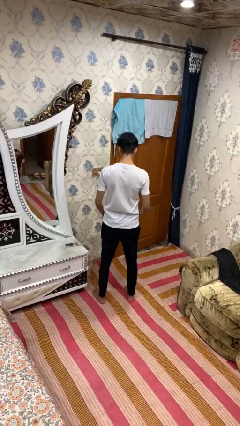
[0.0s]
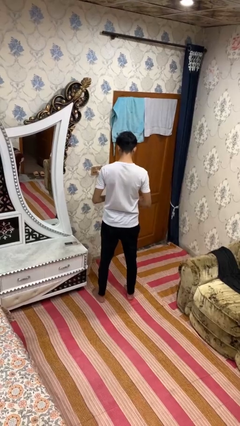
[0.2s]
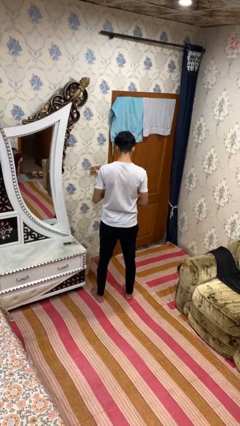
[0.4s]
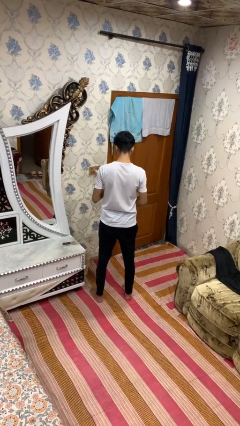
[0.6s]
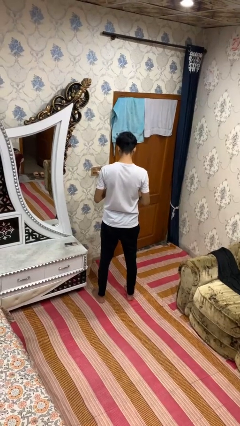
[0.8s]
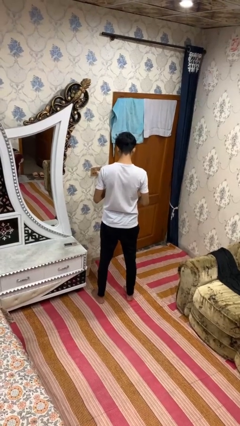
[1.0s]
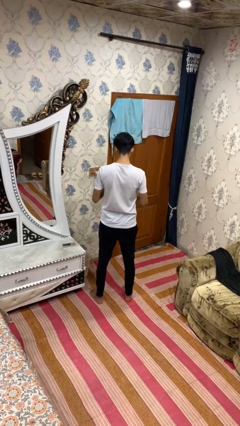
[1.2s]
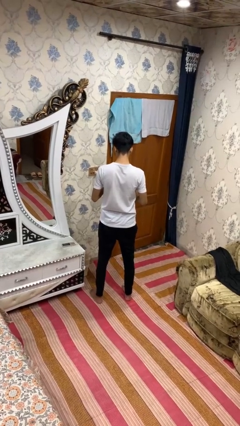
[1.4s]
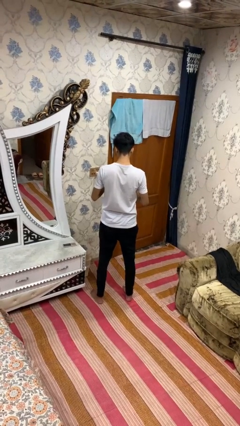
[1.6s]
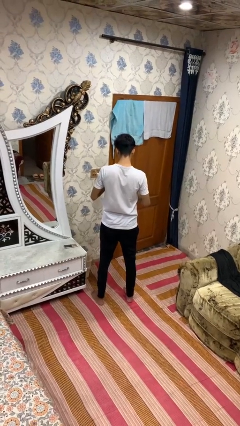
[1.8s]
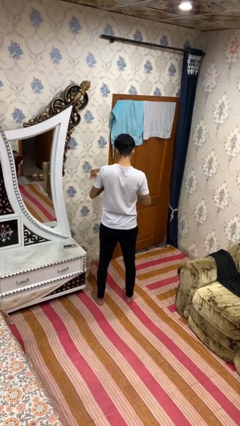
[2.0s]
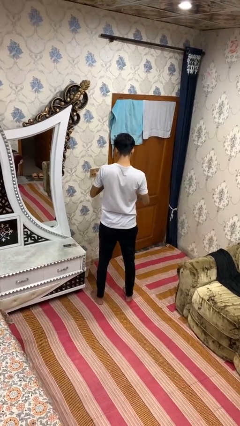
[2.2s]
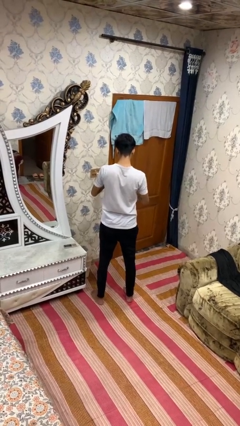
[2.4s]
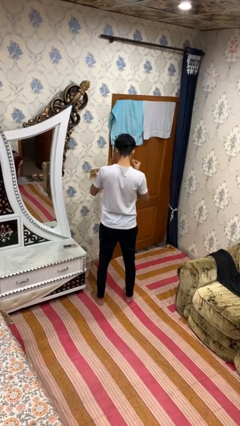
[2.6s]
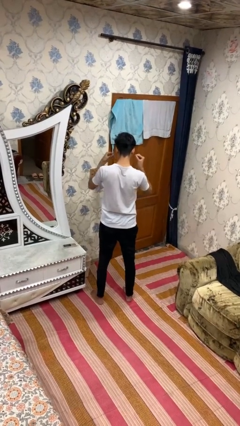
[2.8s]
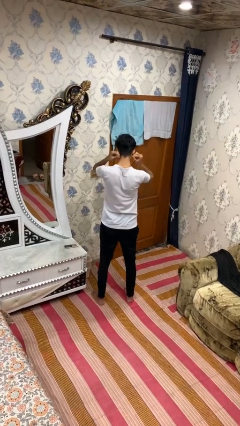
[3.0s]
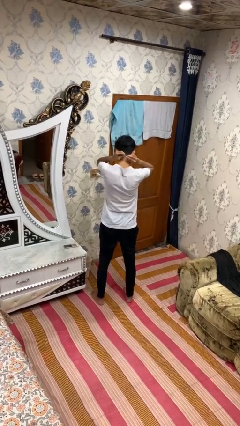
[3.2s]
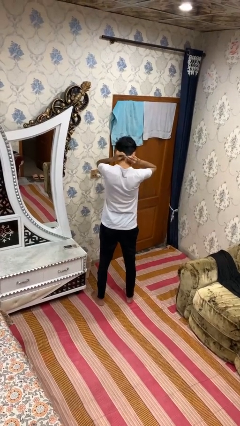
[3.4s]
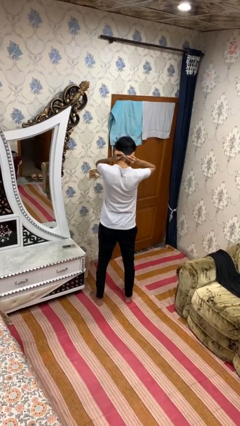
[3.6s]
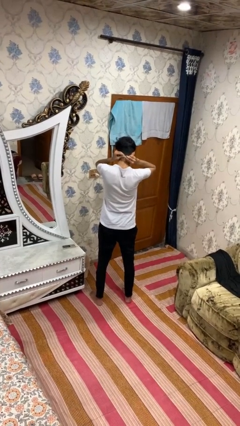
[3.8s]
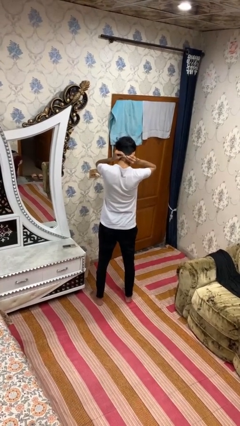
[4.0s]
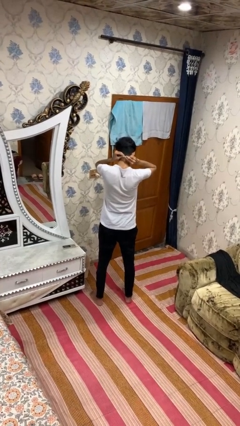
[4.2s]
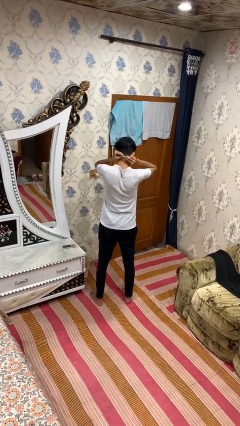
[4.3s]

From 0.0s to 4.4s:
person puts on necklace

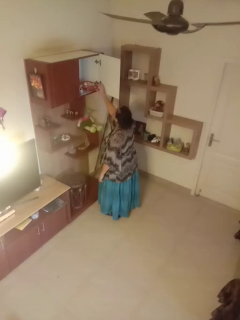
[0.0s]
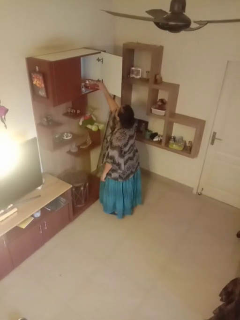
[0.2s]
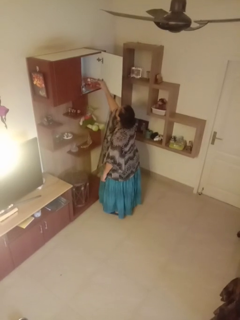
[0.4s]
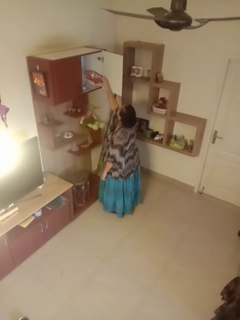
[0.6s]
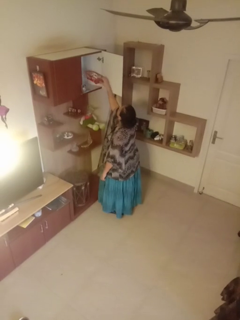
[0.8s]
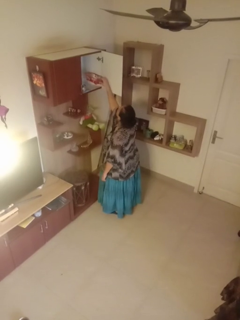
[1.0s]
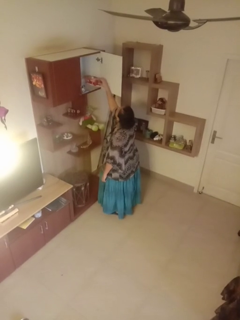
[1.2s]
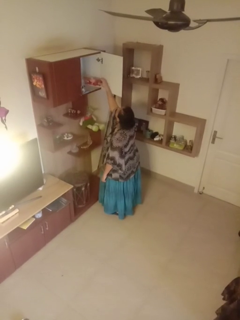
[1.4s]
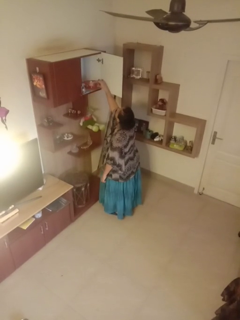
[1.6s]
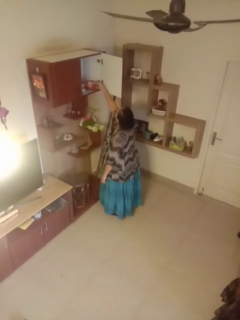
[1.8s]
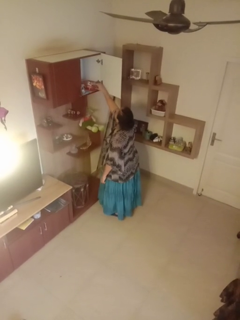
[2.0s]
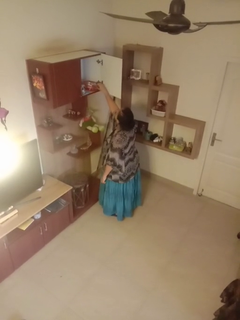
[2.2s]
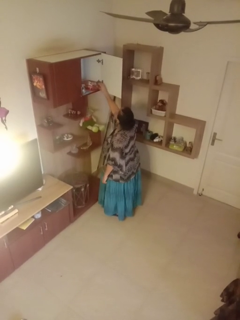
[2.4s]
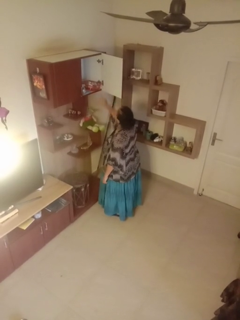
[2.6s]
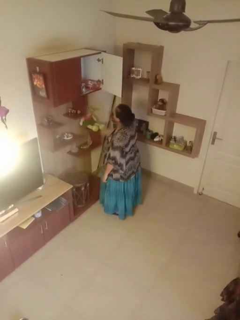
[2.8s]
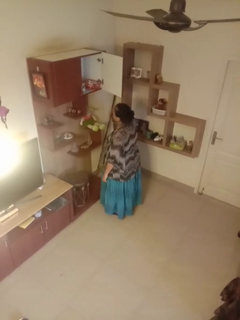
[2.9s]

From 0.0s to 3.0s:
person searches in cabinet

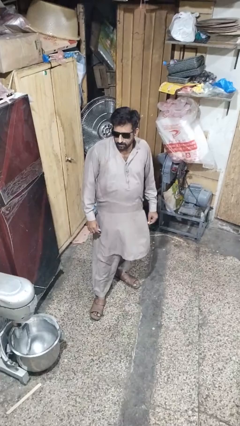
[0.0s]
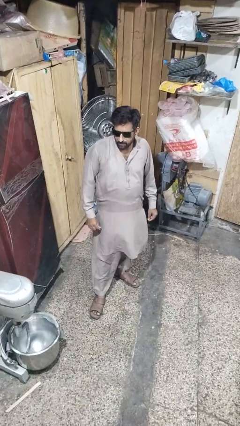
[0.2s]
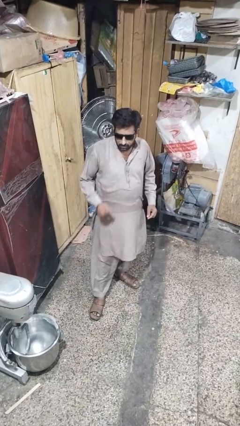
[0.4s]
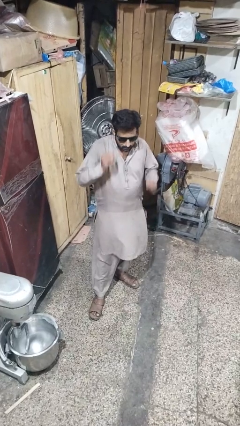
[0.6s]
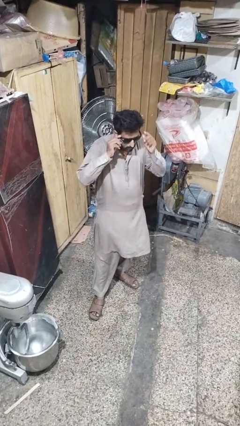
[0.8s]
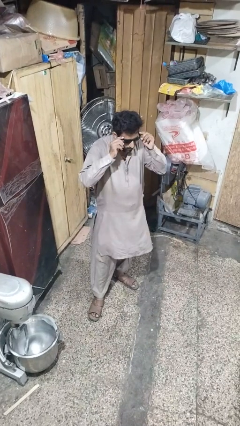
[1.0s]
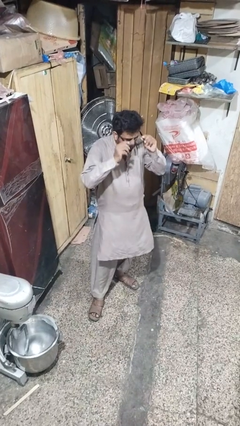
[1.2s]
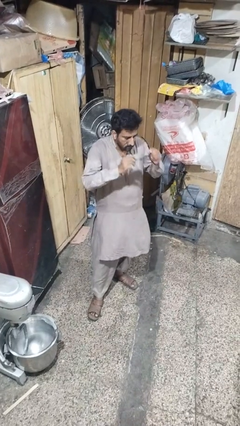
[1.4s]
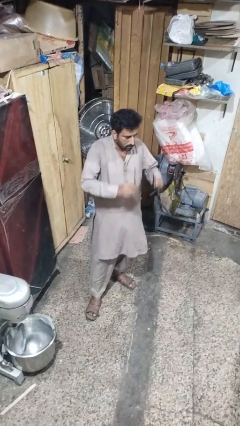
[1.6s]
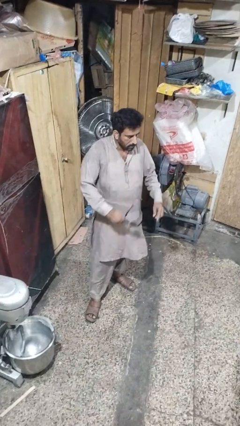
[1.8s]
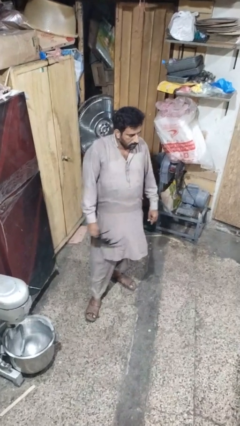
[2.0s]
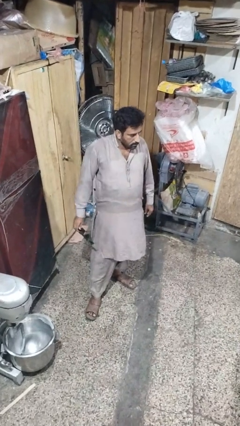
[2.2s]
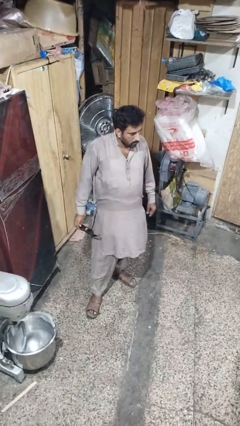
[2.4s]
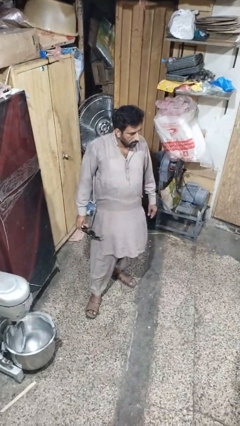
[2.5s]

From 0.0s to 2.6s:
person takes off sunglasses

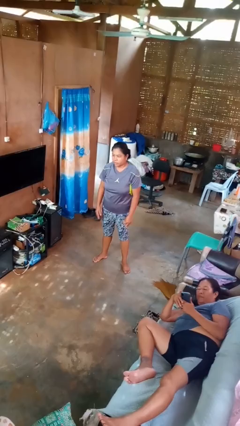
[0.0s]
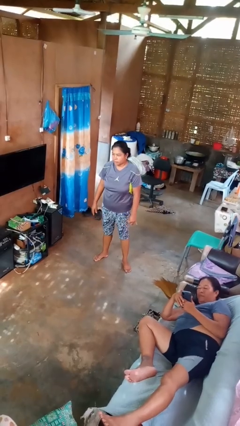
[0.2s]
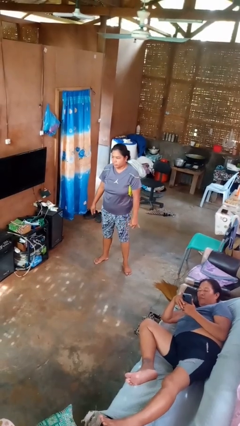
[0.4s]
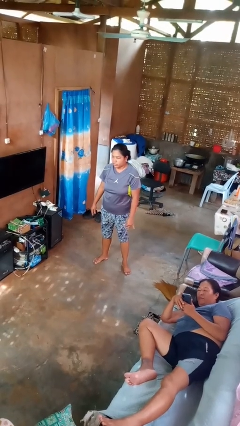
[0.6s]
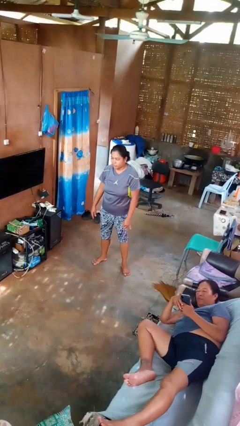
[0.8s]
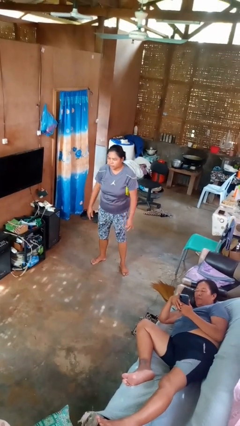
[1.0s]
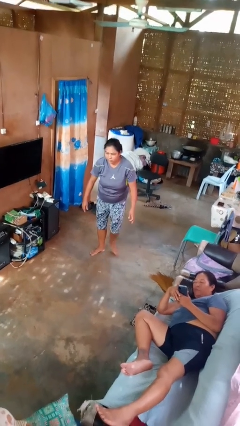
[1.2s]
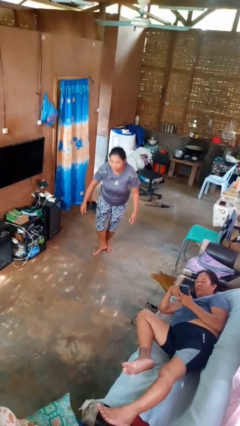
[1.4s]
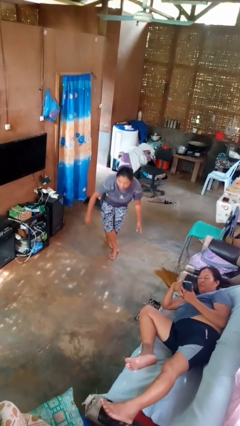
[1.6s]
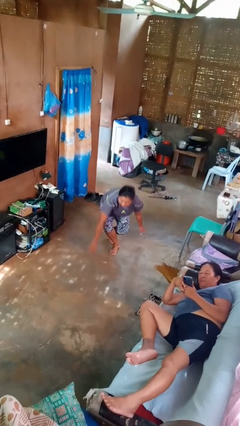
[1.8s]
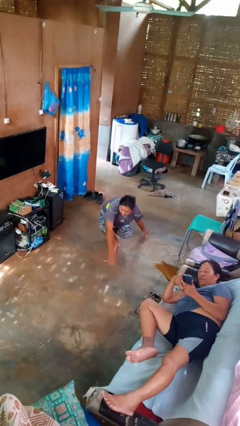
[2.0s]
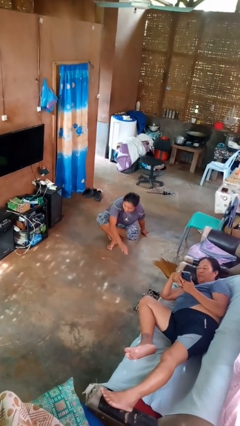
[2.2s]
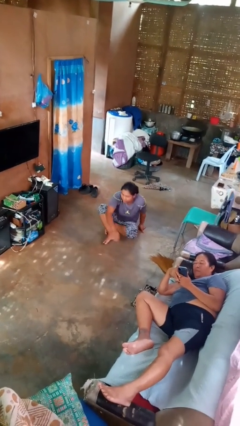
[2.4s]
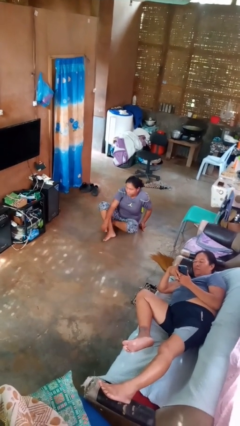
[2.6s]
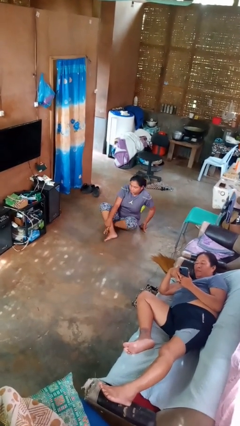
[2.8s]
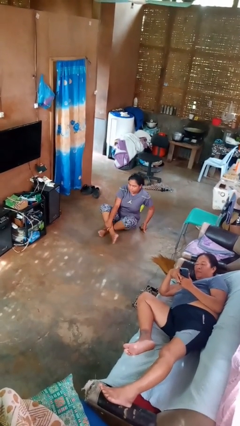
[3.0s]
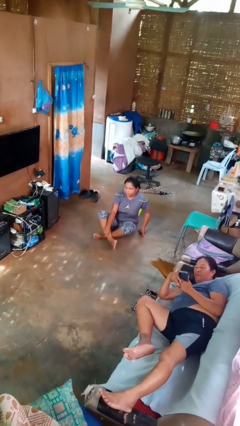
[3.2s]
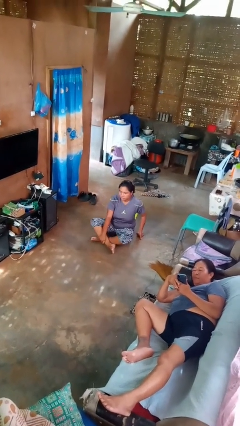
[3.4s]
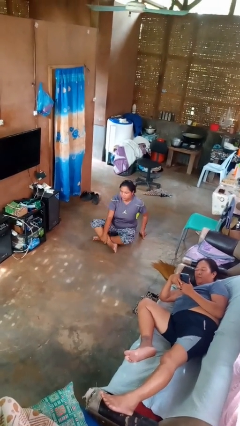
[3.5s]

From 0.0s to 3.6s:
person sits crisscross

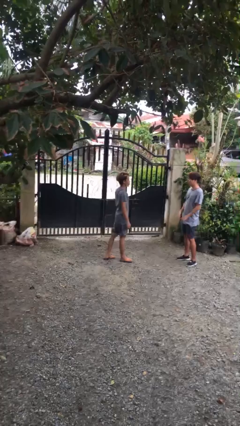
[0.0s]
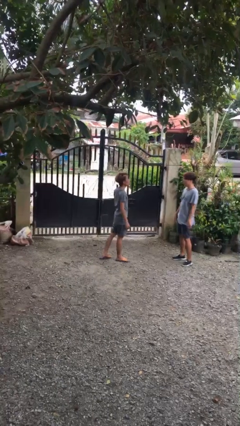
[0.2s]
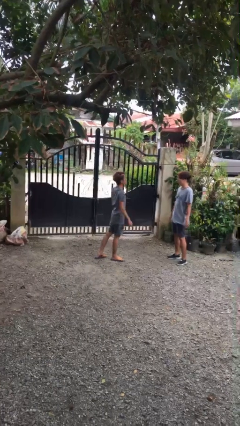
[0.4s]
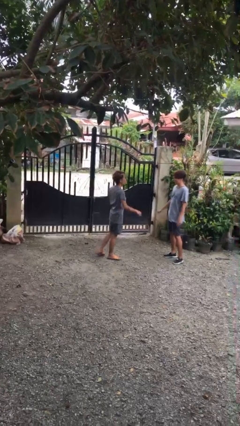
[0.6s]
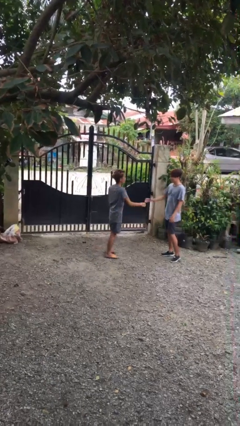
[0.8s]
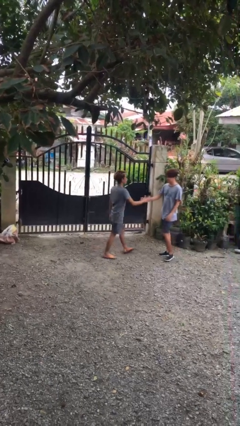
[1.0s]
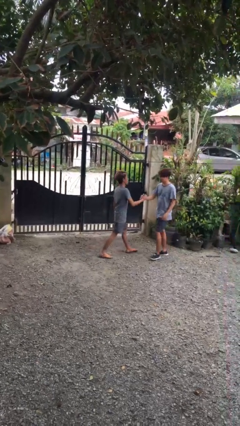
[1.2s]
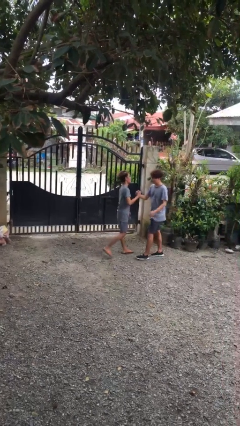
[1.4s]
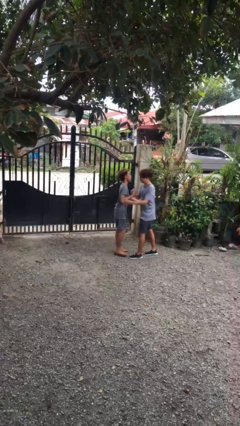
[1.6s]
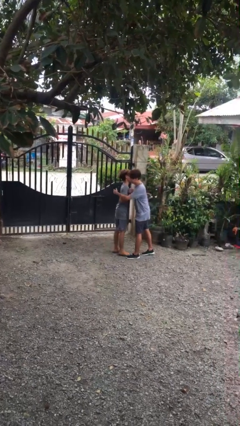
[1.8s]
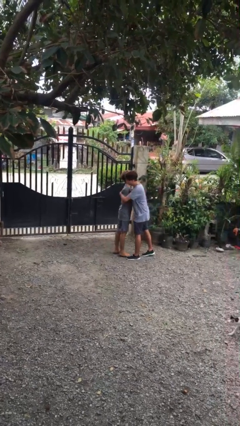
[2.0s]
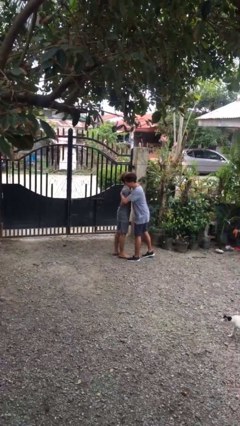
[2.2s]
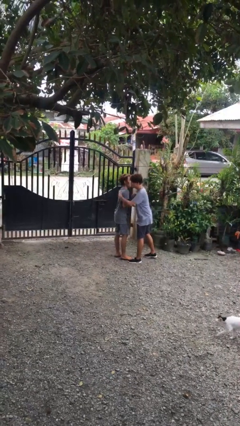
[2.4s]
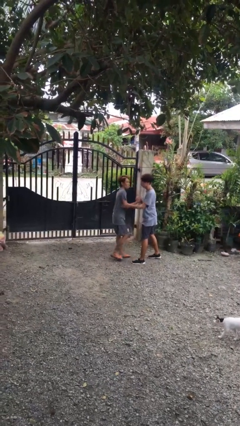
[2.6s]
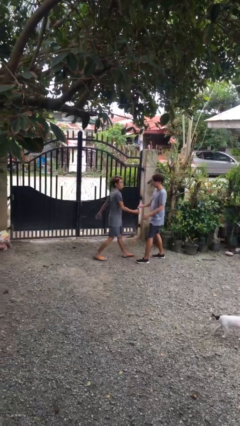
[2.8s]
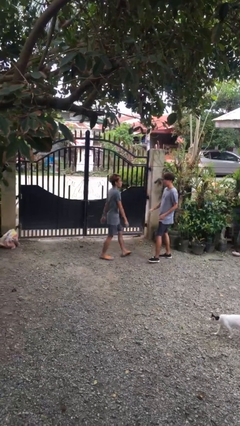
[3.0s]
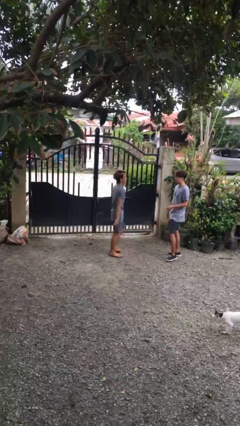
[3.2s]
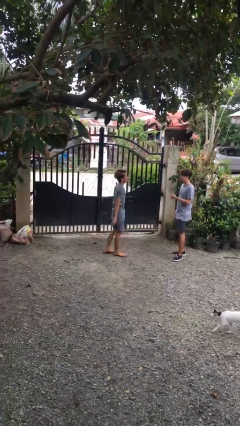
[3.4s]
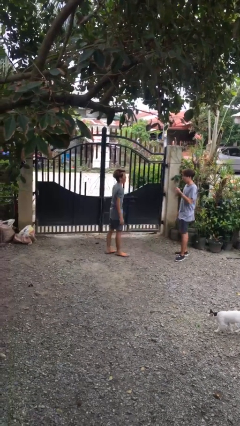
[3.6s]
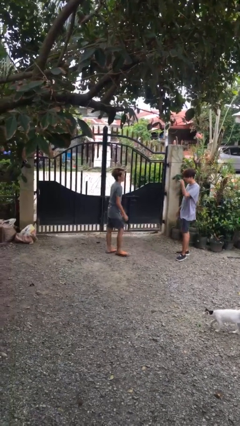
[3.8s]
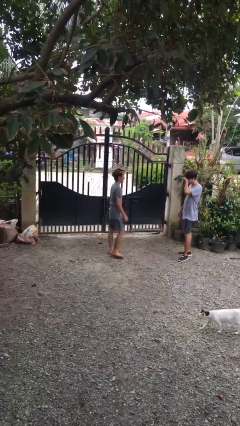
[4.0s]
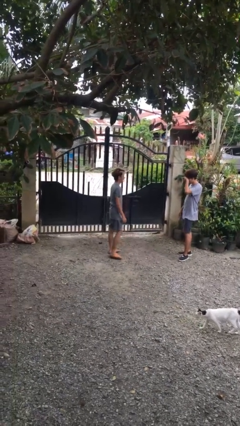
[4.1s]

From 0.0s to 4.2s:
person embraces person

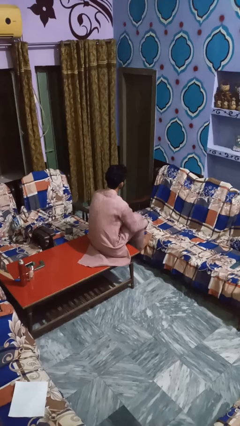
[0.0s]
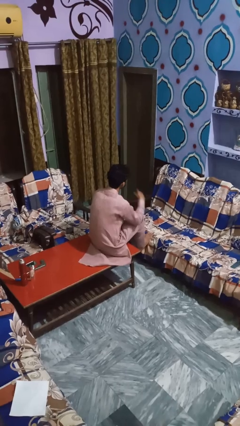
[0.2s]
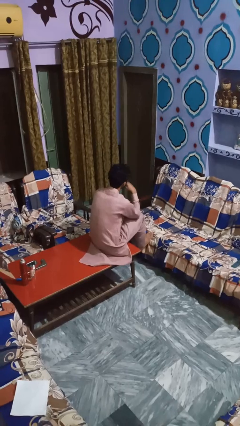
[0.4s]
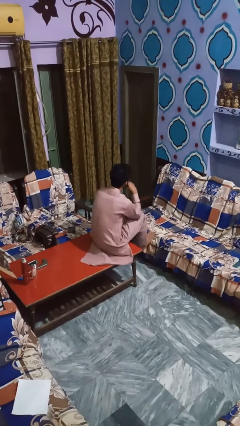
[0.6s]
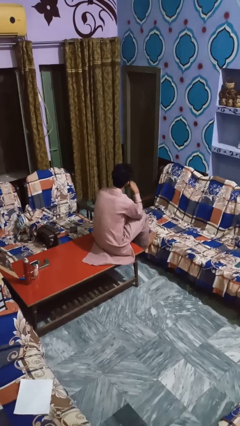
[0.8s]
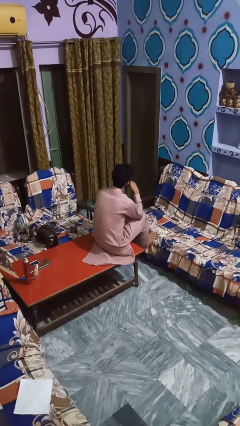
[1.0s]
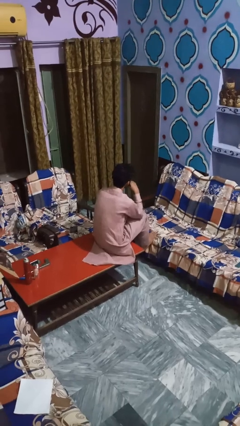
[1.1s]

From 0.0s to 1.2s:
person licks fingers
